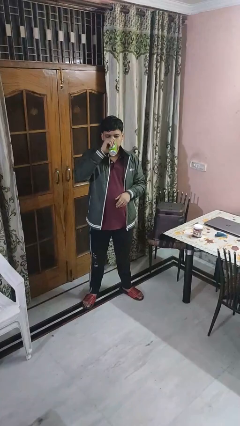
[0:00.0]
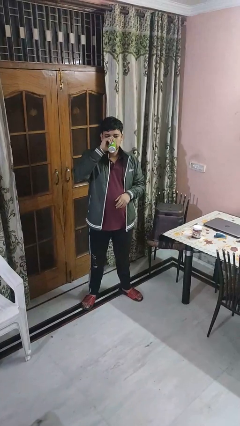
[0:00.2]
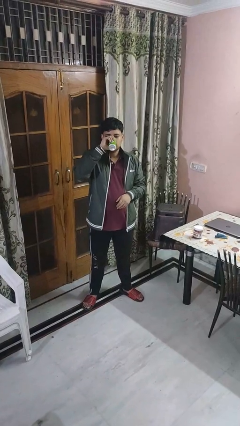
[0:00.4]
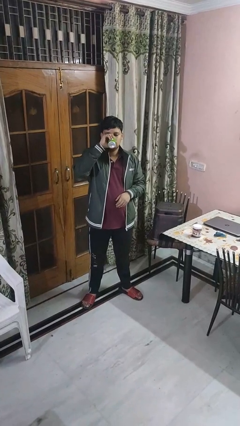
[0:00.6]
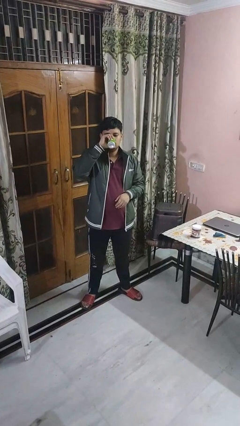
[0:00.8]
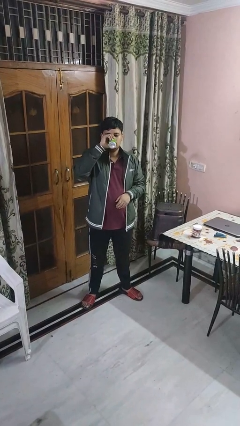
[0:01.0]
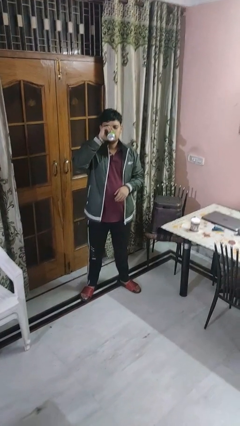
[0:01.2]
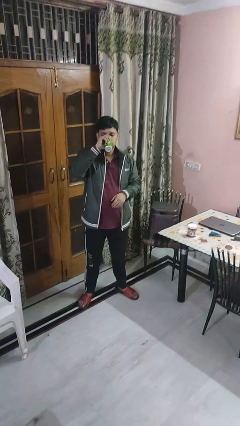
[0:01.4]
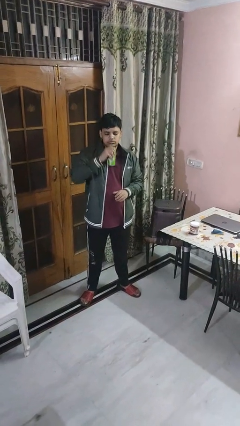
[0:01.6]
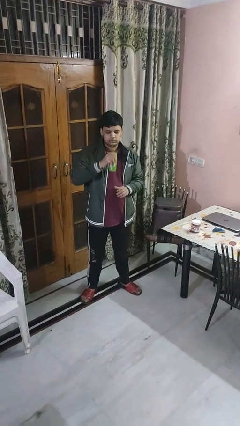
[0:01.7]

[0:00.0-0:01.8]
person drinks from beverage can

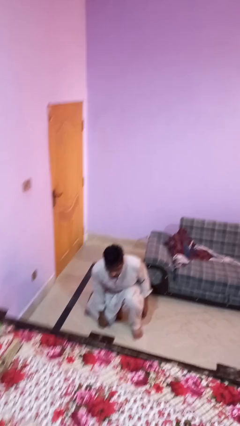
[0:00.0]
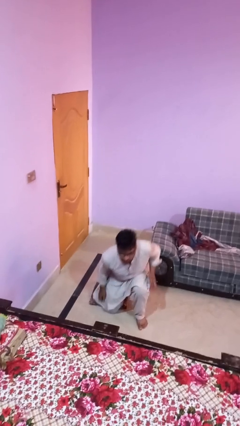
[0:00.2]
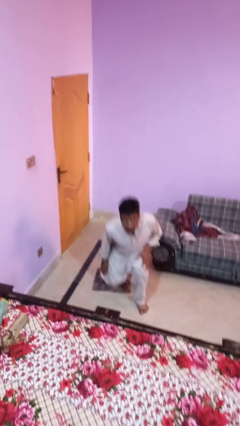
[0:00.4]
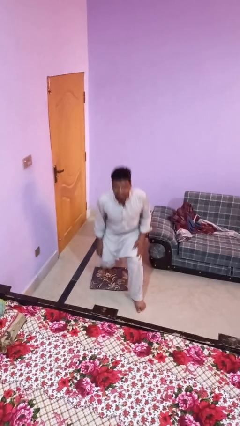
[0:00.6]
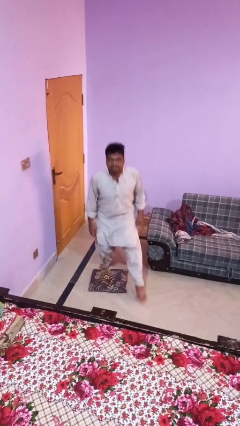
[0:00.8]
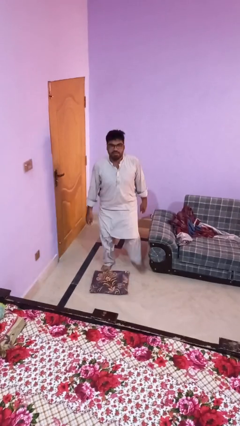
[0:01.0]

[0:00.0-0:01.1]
person stands up from floor

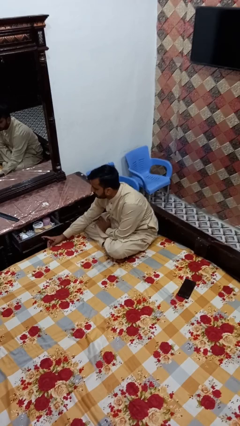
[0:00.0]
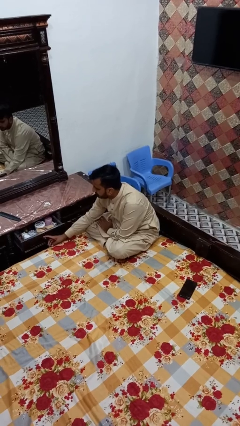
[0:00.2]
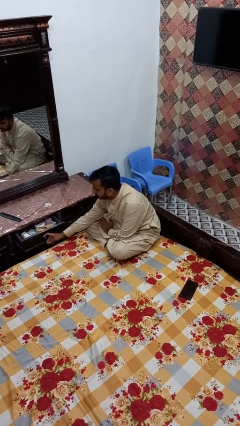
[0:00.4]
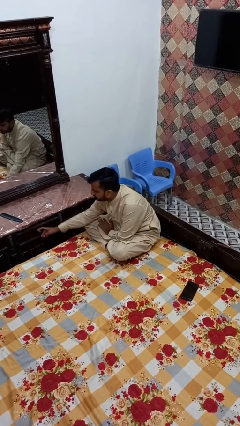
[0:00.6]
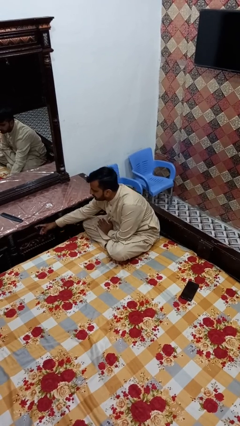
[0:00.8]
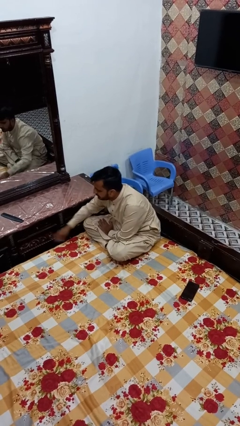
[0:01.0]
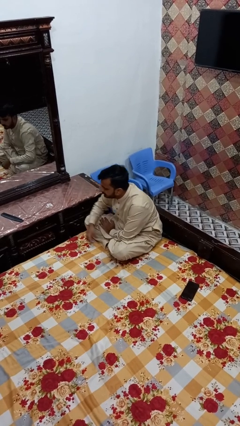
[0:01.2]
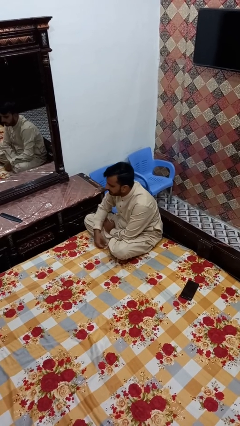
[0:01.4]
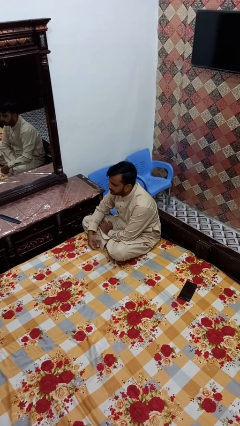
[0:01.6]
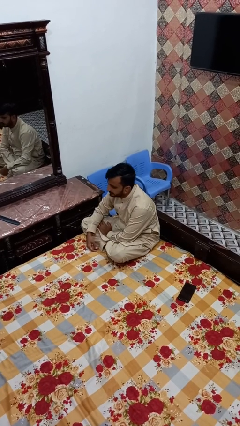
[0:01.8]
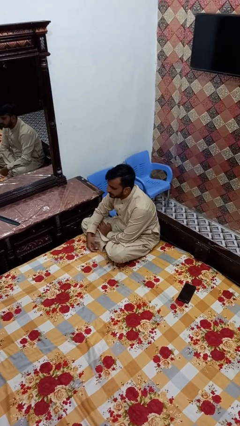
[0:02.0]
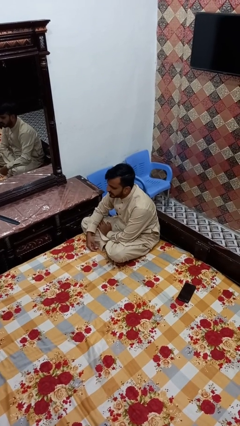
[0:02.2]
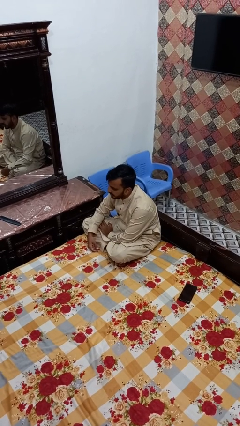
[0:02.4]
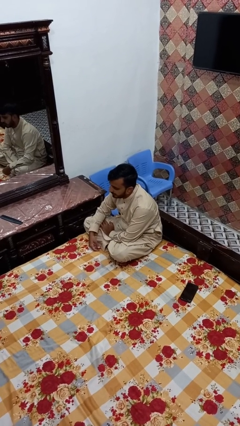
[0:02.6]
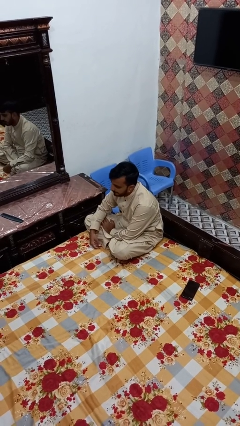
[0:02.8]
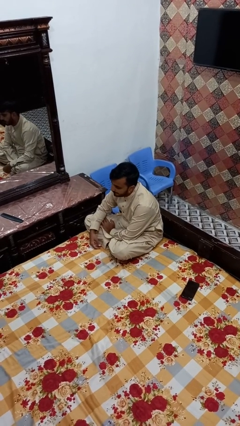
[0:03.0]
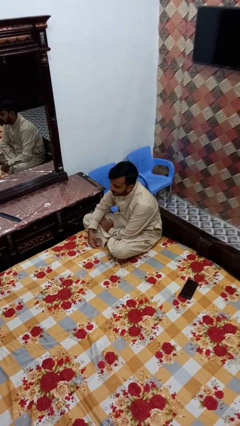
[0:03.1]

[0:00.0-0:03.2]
person closes dresser drawer

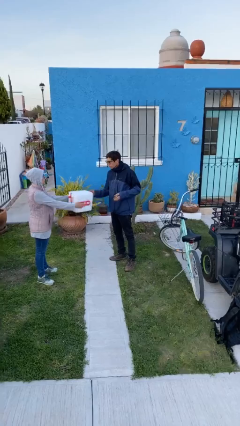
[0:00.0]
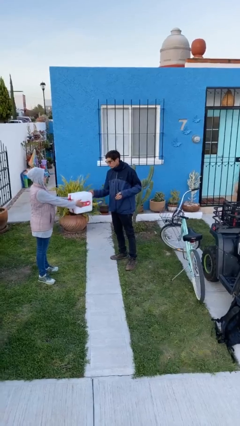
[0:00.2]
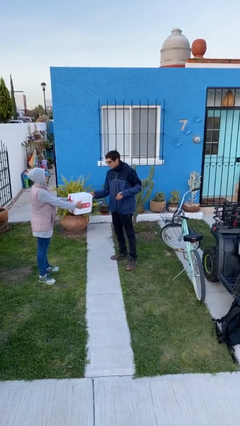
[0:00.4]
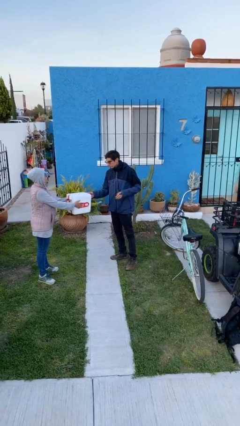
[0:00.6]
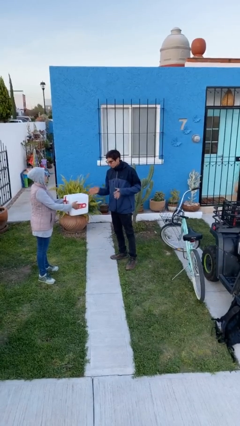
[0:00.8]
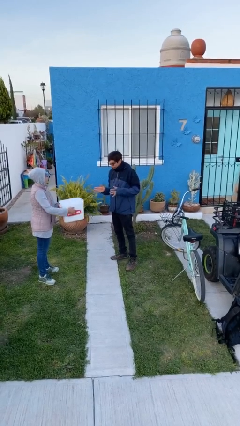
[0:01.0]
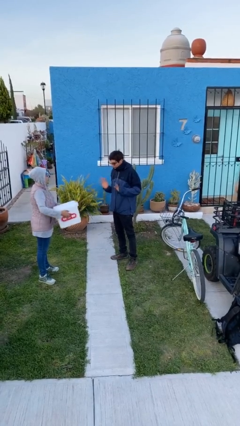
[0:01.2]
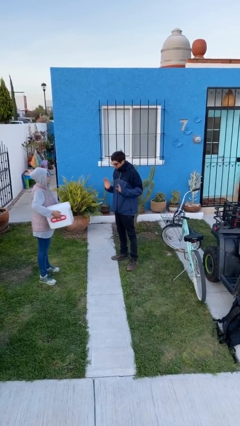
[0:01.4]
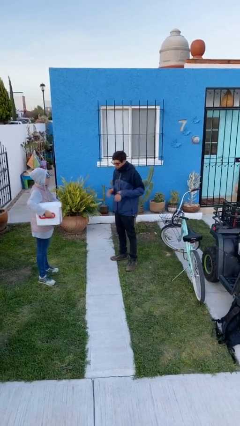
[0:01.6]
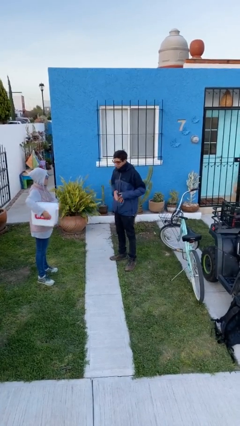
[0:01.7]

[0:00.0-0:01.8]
person transfers object to person

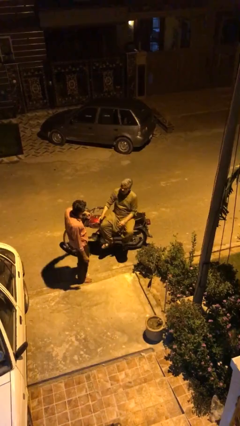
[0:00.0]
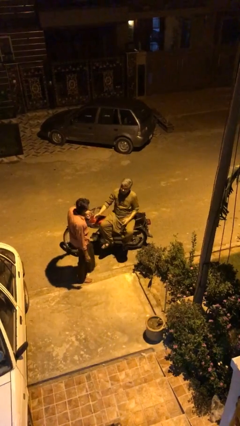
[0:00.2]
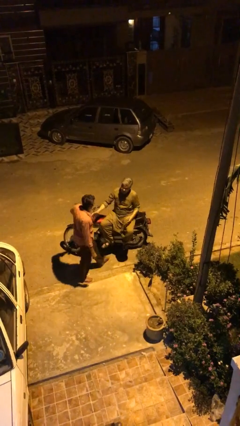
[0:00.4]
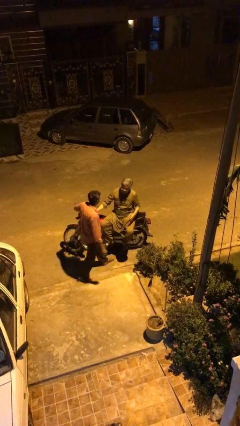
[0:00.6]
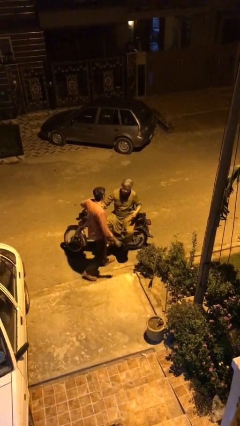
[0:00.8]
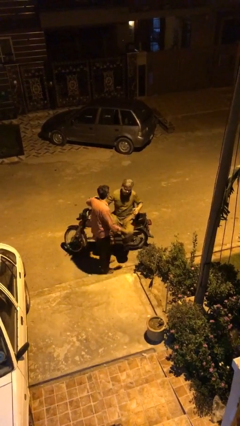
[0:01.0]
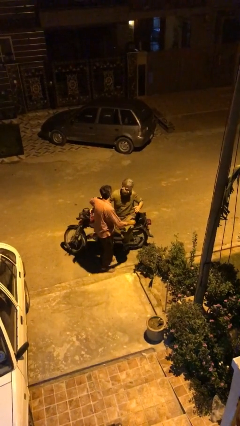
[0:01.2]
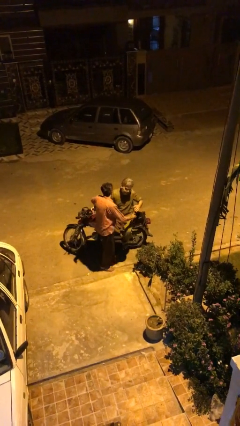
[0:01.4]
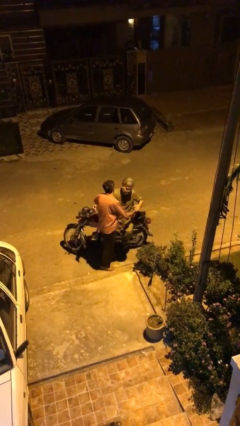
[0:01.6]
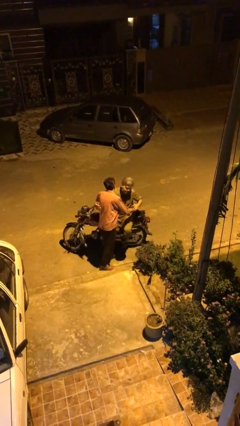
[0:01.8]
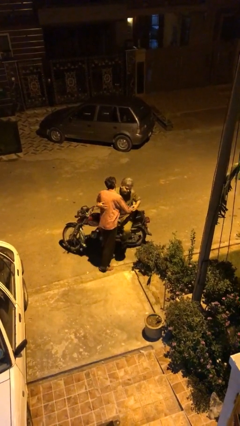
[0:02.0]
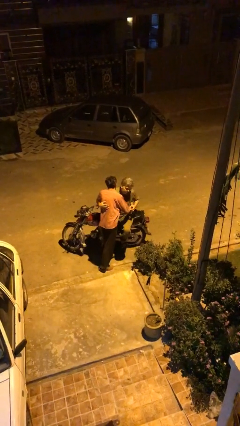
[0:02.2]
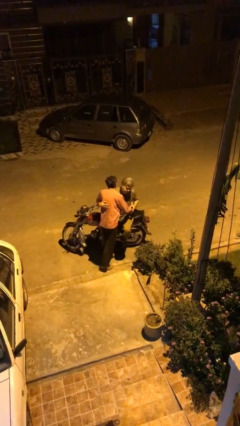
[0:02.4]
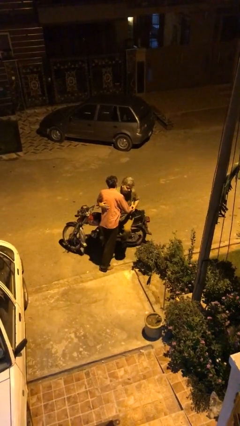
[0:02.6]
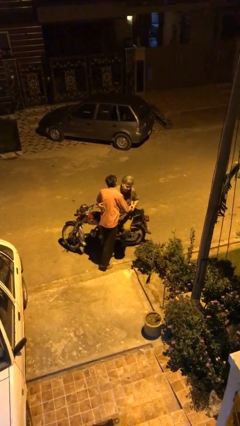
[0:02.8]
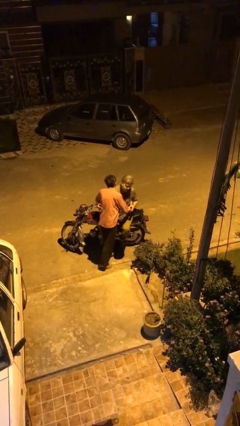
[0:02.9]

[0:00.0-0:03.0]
person embraces person

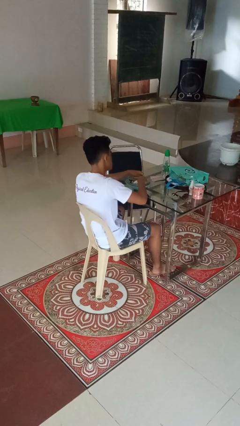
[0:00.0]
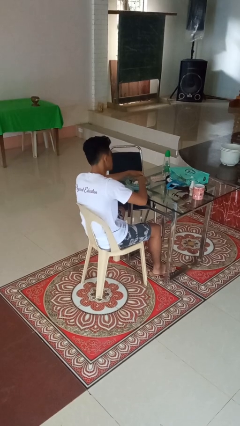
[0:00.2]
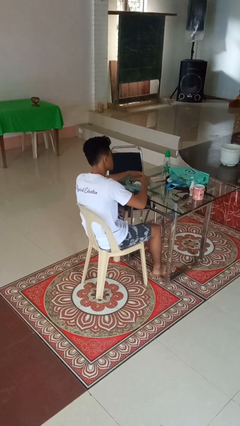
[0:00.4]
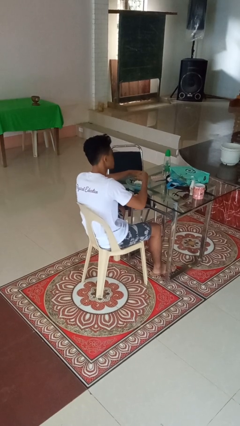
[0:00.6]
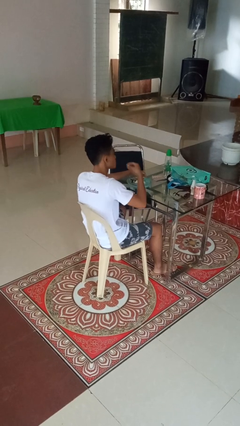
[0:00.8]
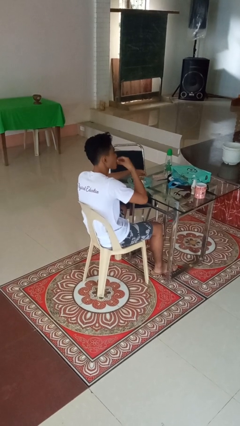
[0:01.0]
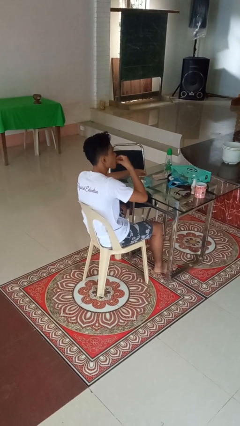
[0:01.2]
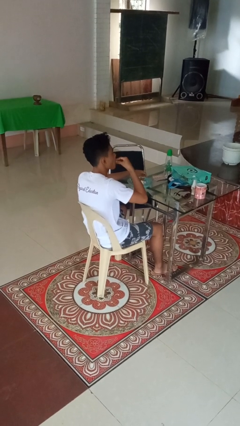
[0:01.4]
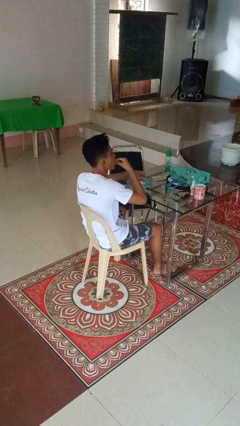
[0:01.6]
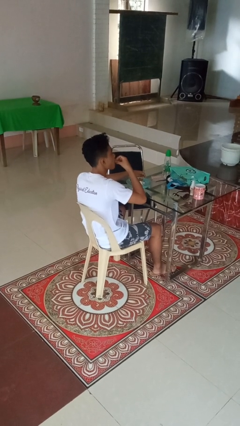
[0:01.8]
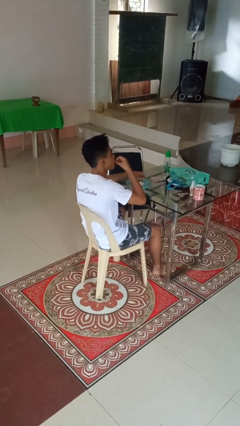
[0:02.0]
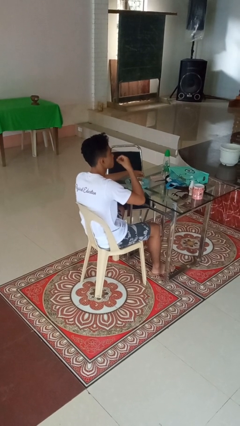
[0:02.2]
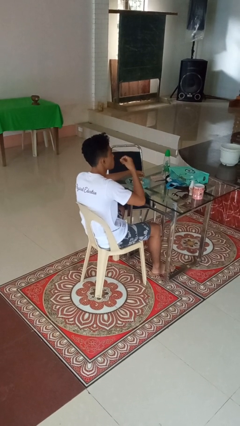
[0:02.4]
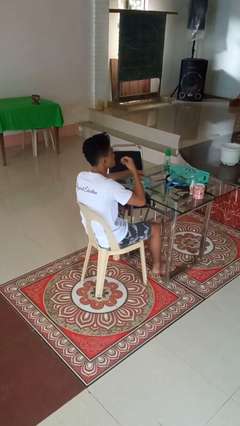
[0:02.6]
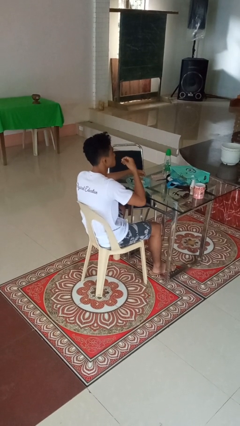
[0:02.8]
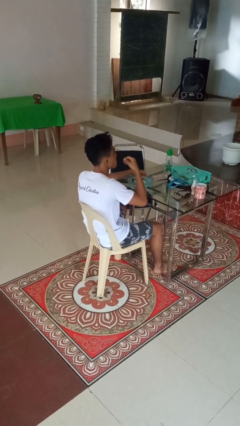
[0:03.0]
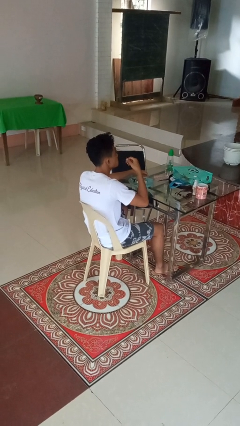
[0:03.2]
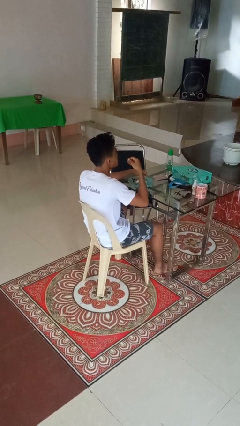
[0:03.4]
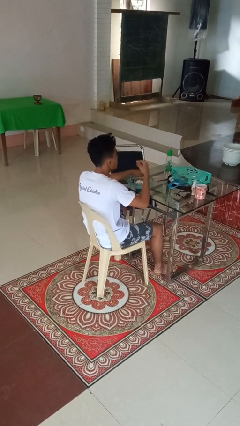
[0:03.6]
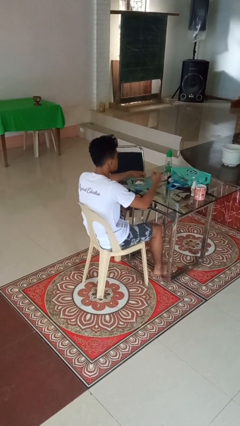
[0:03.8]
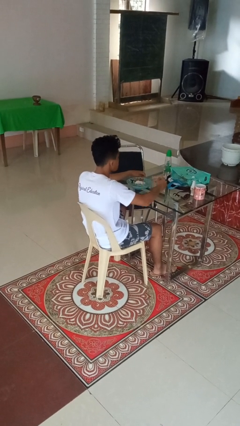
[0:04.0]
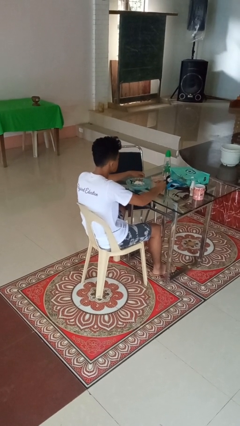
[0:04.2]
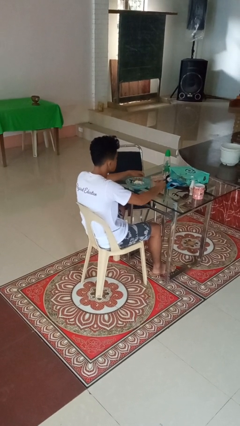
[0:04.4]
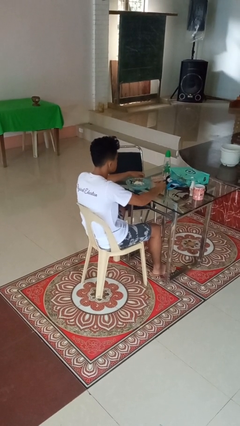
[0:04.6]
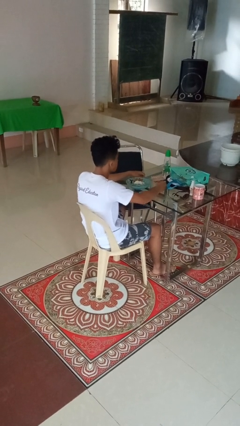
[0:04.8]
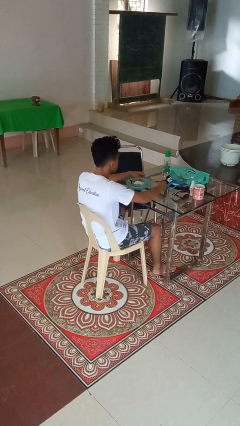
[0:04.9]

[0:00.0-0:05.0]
person eats with hands

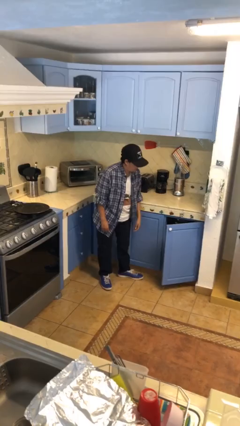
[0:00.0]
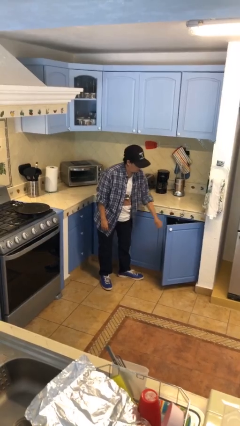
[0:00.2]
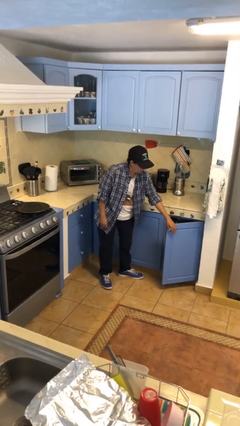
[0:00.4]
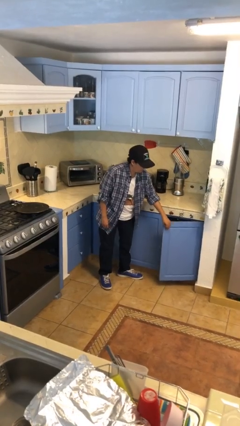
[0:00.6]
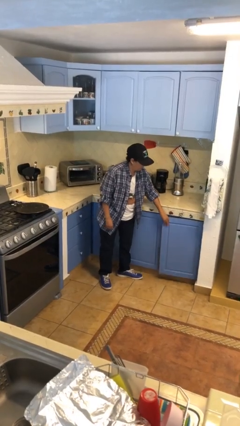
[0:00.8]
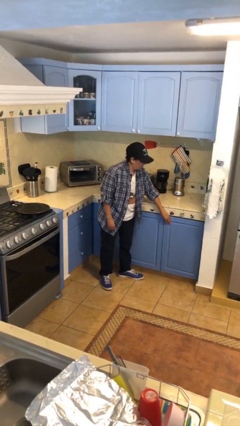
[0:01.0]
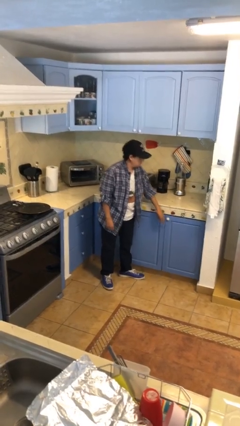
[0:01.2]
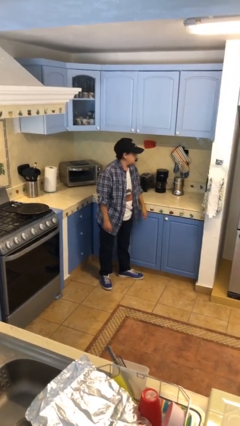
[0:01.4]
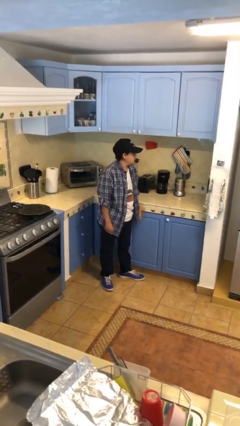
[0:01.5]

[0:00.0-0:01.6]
person closes cabinet
